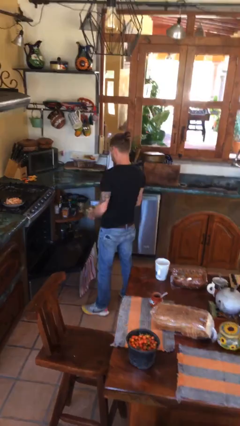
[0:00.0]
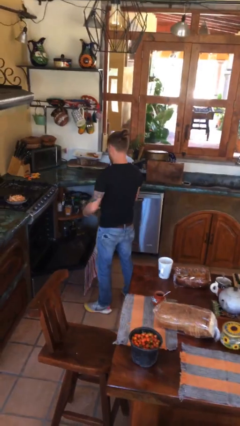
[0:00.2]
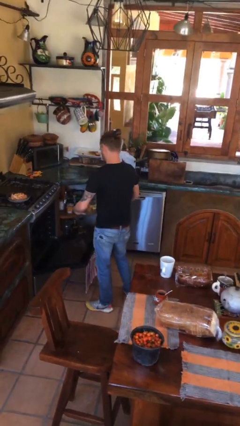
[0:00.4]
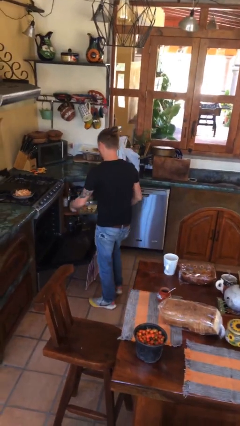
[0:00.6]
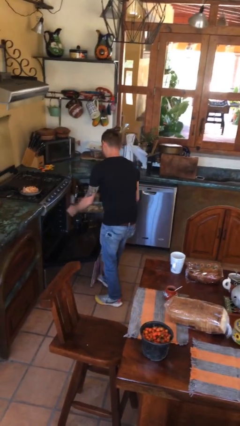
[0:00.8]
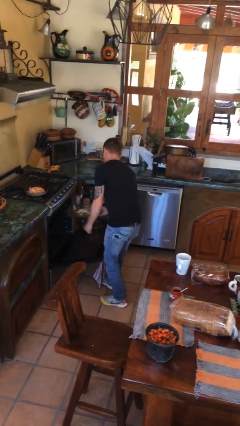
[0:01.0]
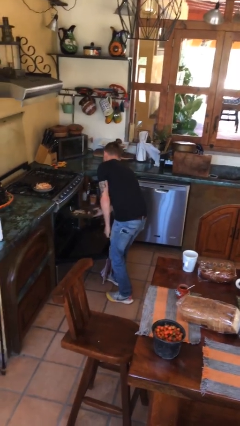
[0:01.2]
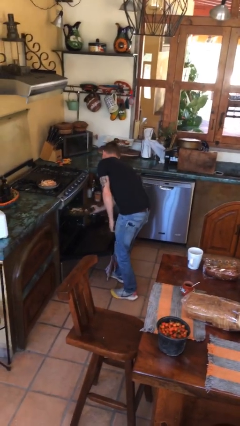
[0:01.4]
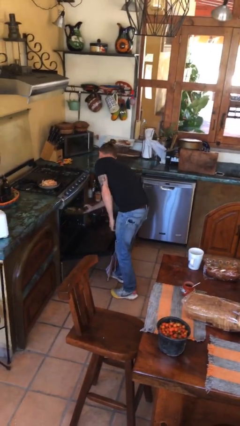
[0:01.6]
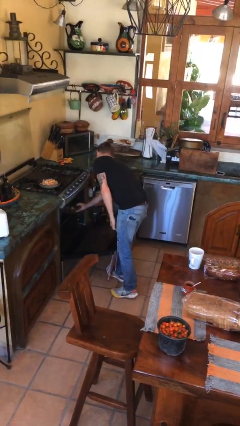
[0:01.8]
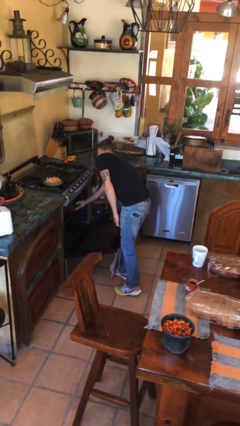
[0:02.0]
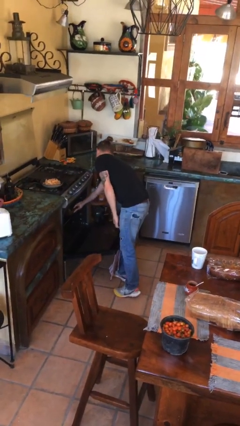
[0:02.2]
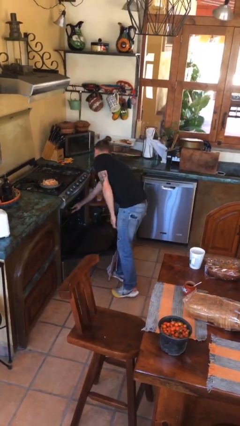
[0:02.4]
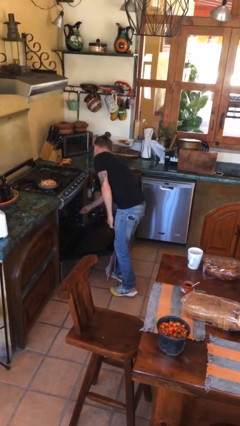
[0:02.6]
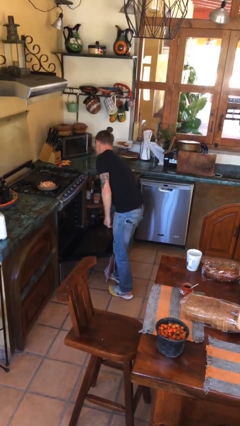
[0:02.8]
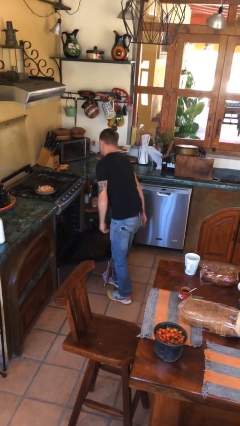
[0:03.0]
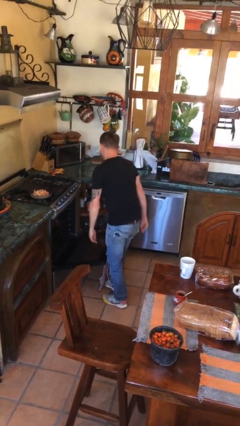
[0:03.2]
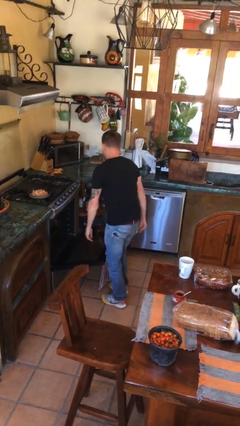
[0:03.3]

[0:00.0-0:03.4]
person puts object into oven

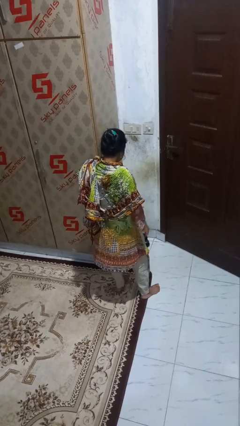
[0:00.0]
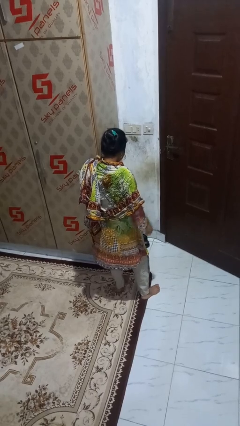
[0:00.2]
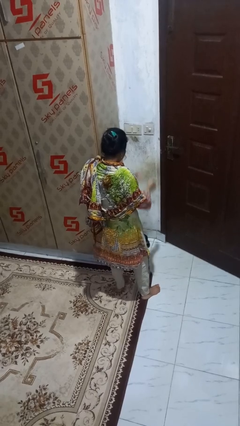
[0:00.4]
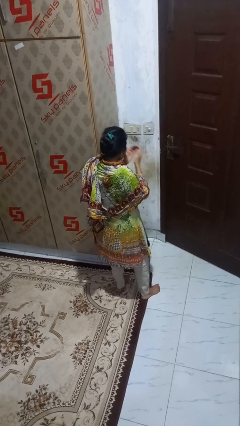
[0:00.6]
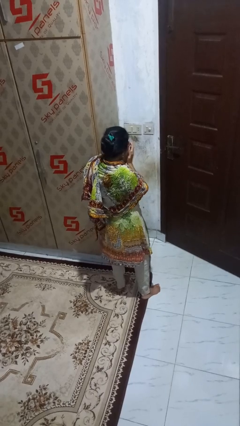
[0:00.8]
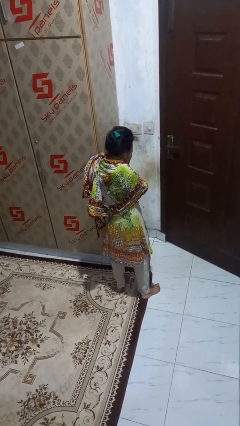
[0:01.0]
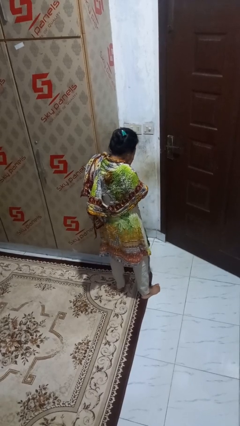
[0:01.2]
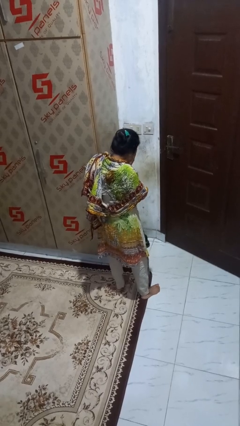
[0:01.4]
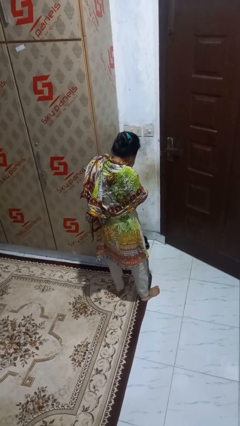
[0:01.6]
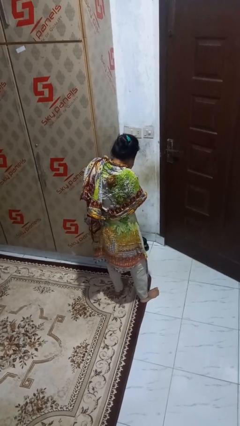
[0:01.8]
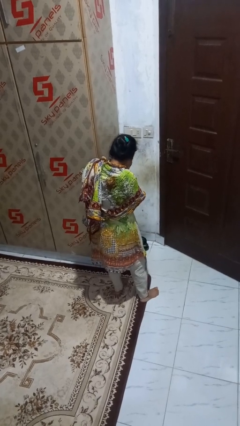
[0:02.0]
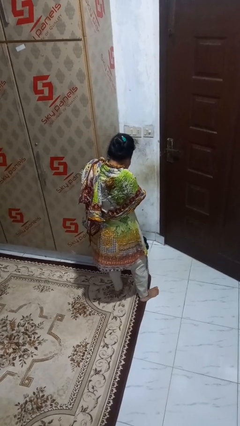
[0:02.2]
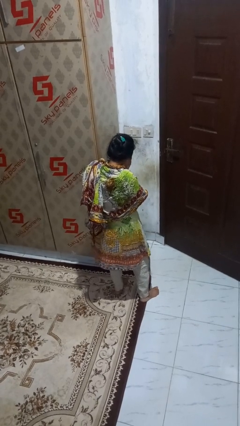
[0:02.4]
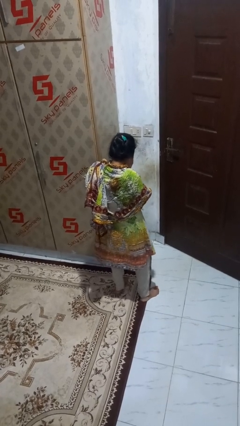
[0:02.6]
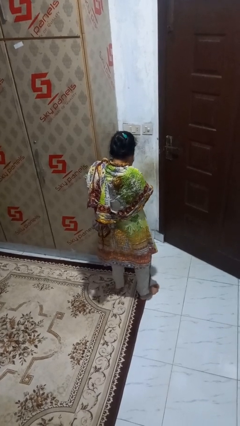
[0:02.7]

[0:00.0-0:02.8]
person sneezes into hand

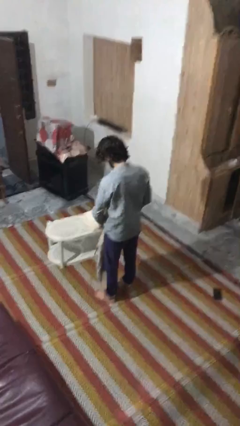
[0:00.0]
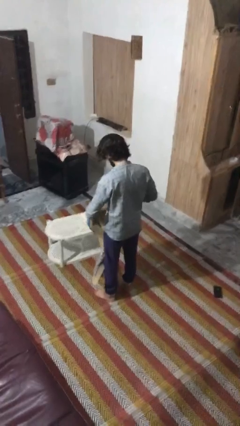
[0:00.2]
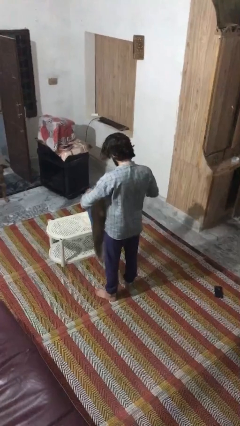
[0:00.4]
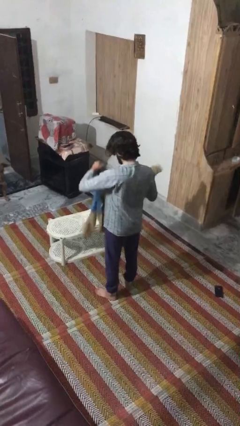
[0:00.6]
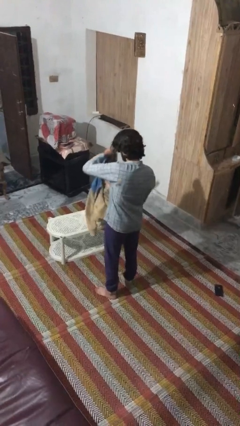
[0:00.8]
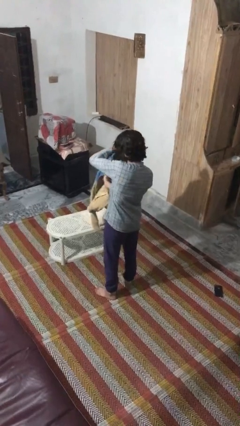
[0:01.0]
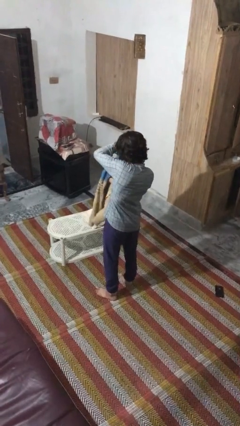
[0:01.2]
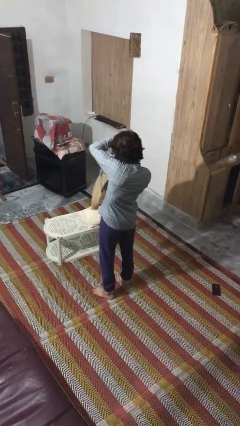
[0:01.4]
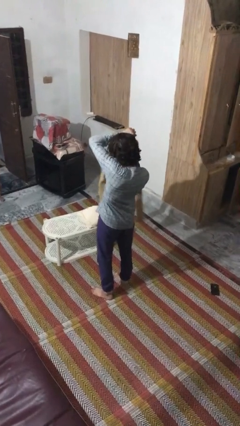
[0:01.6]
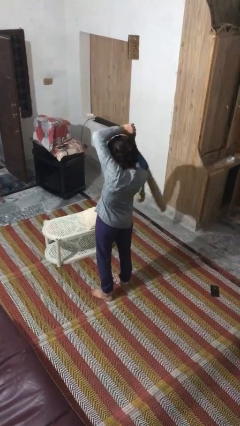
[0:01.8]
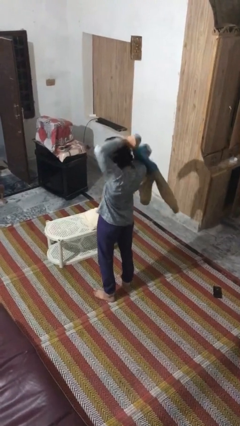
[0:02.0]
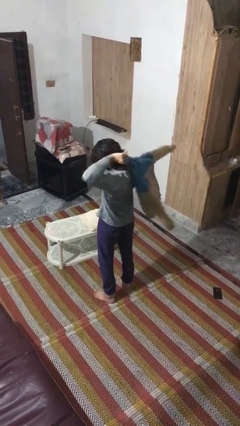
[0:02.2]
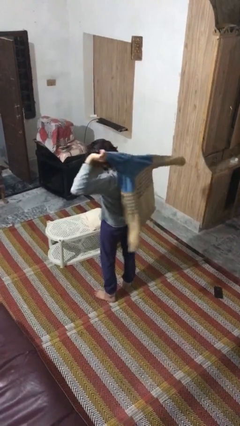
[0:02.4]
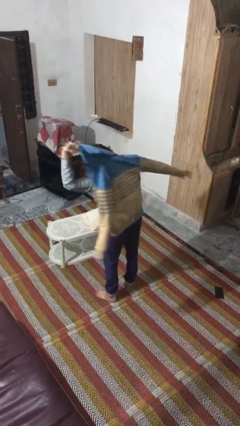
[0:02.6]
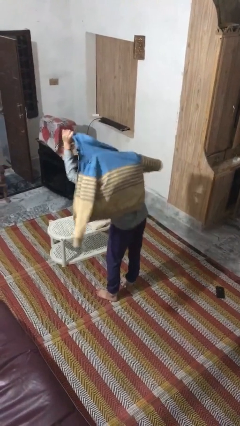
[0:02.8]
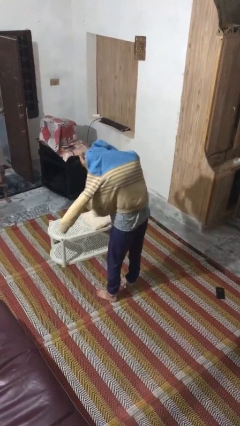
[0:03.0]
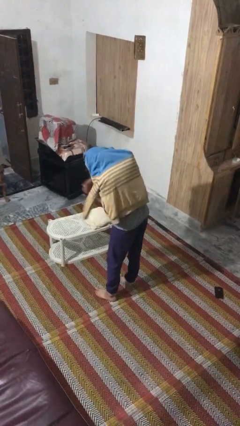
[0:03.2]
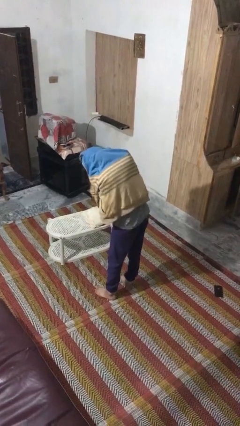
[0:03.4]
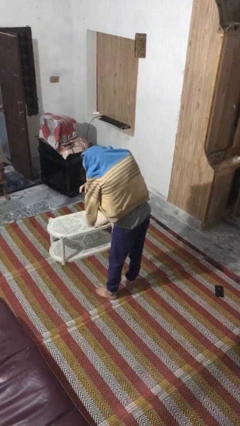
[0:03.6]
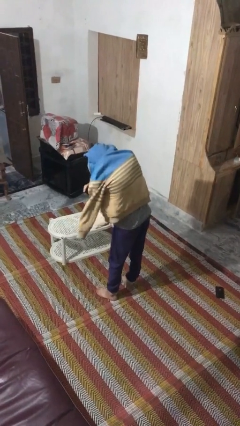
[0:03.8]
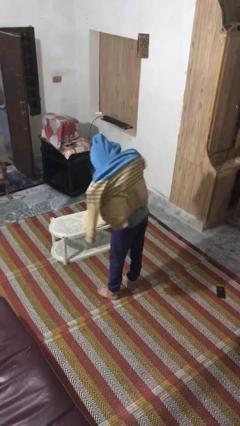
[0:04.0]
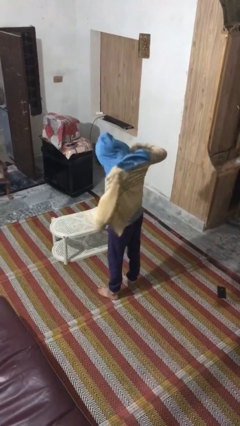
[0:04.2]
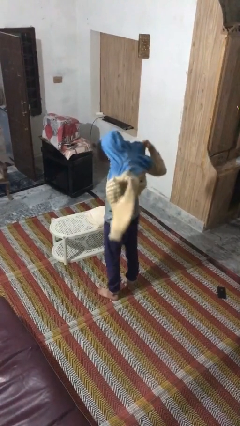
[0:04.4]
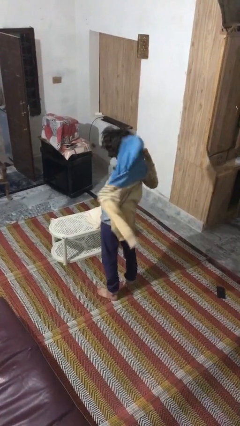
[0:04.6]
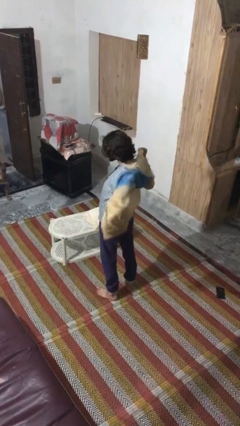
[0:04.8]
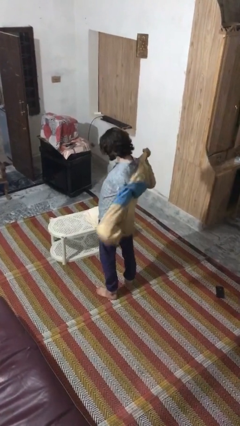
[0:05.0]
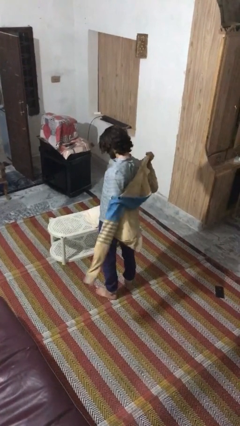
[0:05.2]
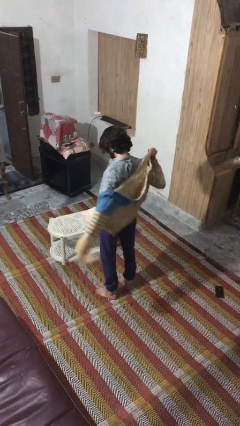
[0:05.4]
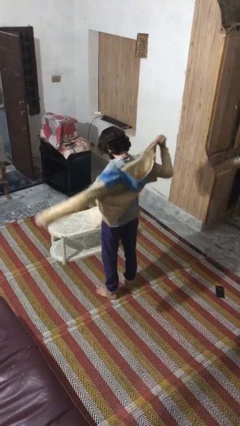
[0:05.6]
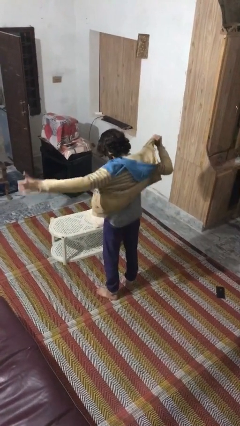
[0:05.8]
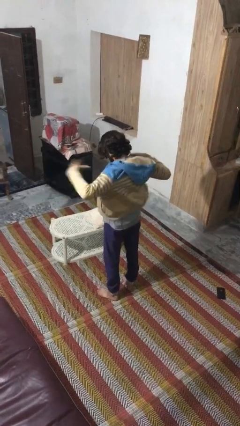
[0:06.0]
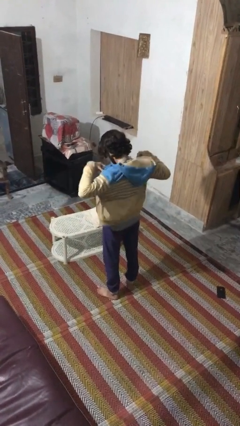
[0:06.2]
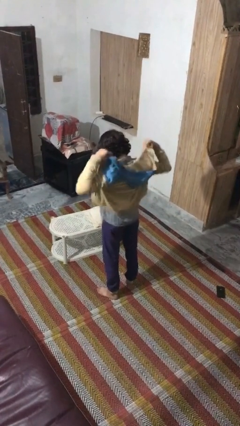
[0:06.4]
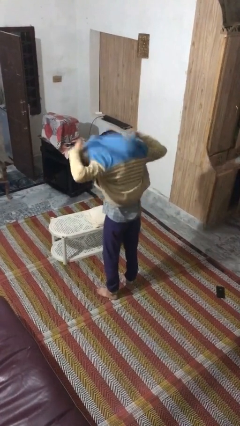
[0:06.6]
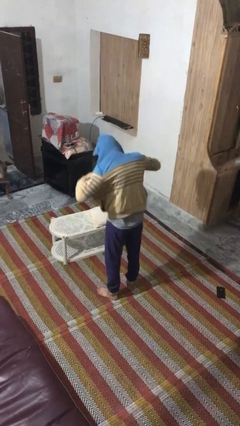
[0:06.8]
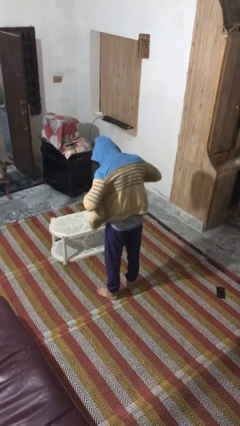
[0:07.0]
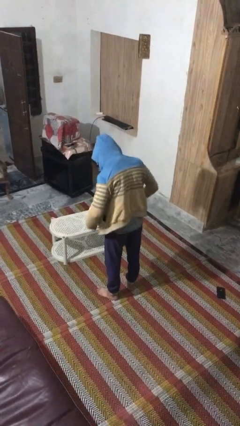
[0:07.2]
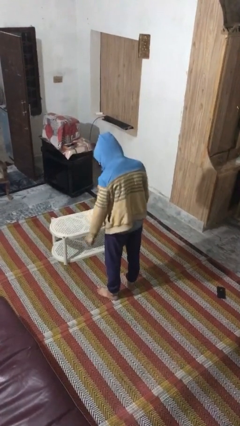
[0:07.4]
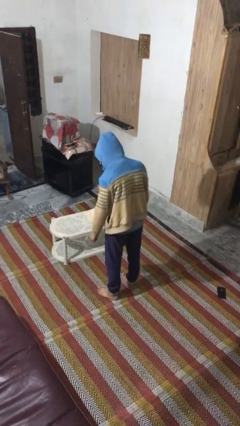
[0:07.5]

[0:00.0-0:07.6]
person puts on hoodie

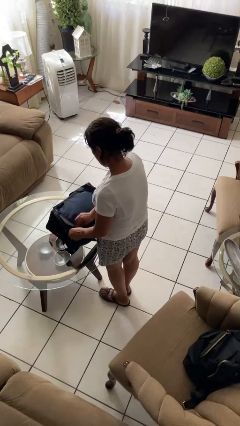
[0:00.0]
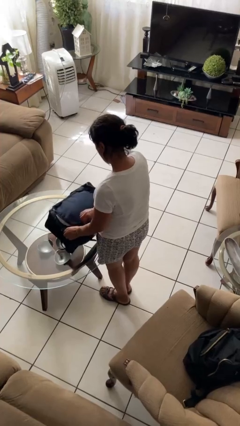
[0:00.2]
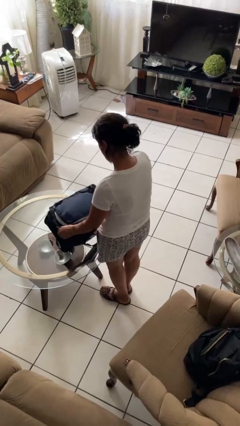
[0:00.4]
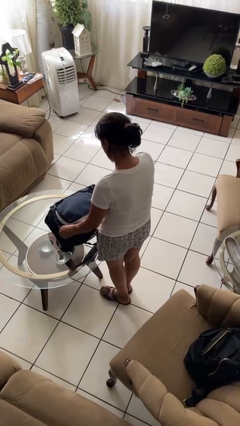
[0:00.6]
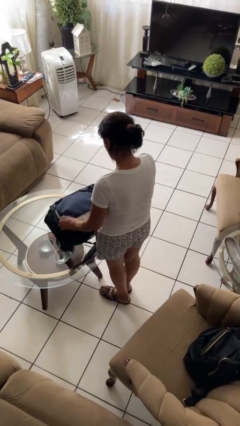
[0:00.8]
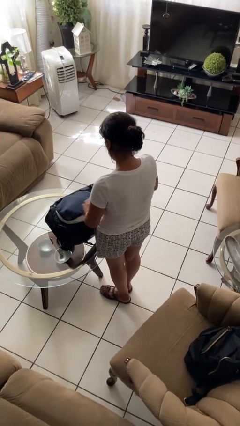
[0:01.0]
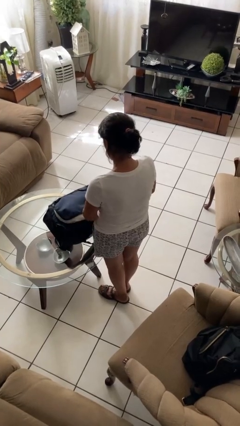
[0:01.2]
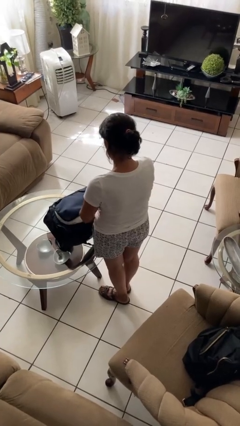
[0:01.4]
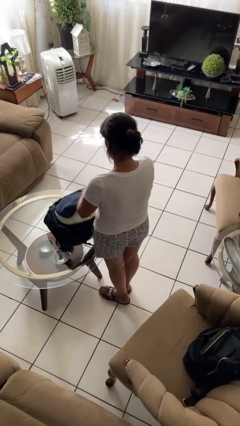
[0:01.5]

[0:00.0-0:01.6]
person opens suitcase

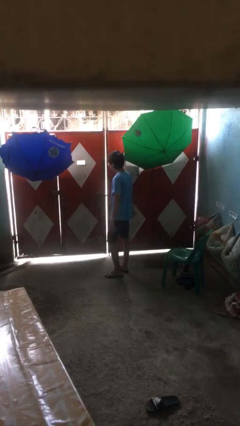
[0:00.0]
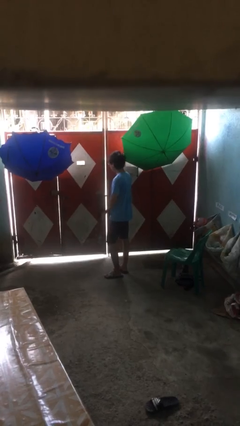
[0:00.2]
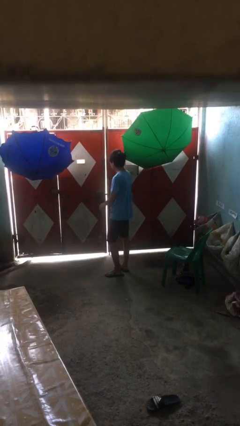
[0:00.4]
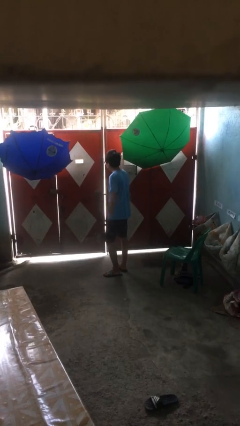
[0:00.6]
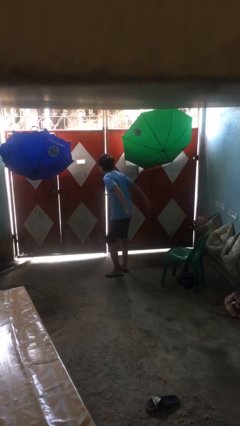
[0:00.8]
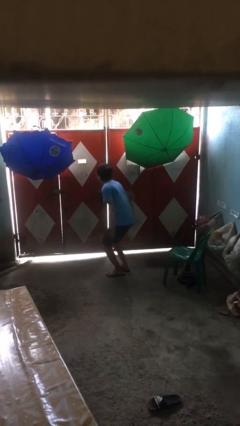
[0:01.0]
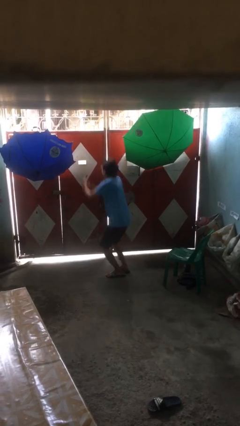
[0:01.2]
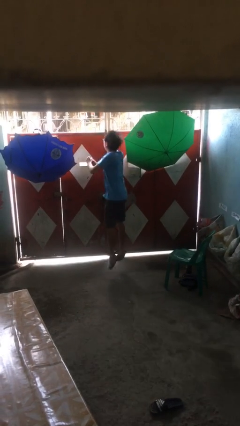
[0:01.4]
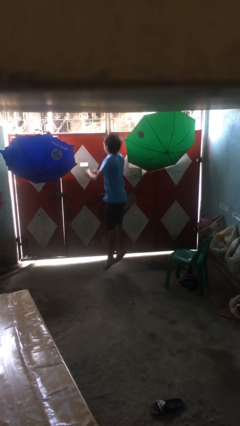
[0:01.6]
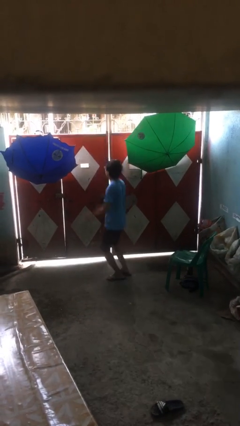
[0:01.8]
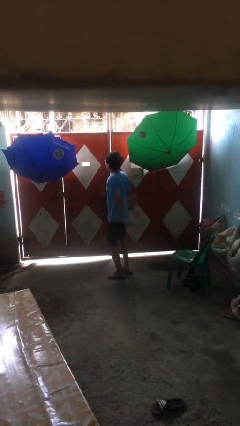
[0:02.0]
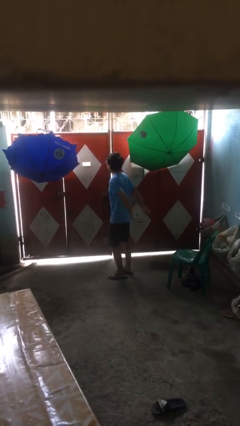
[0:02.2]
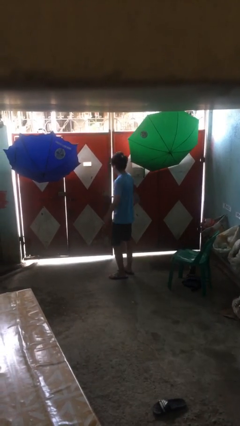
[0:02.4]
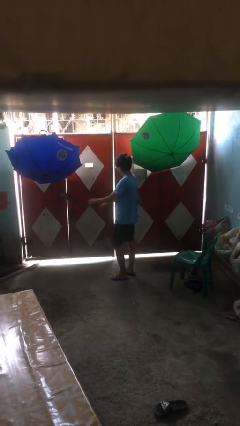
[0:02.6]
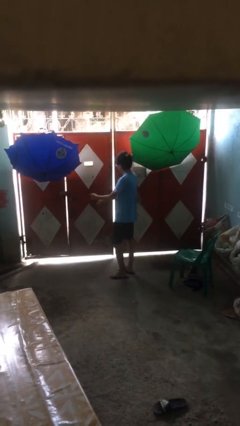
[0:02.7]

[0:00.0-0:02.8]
person jumps
